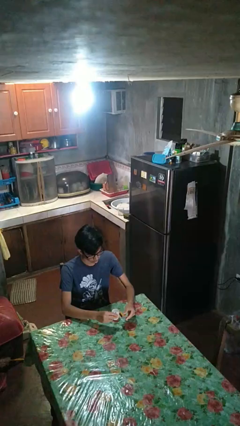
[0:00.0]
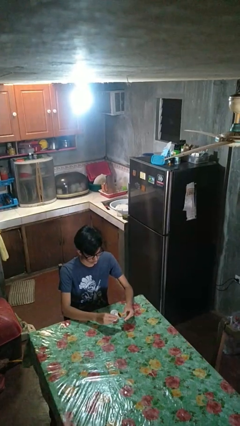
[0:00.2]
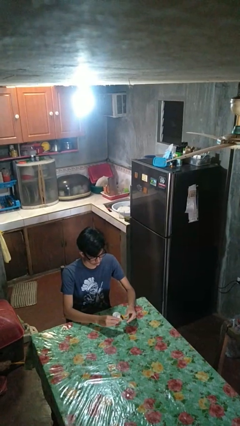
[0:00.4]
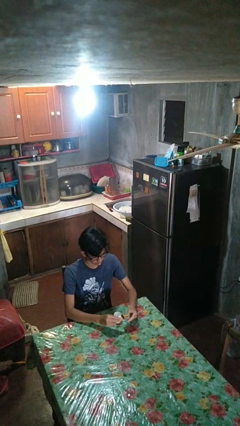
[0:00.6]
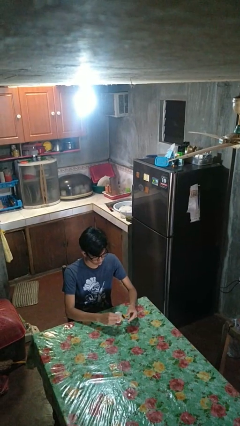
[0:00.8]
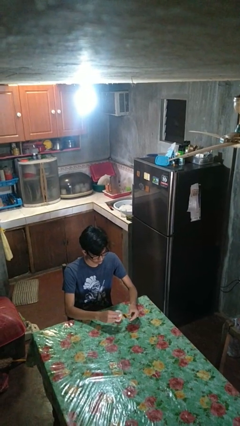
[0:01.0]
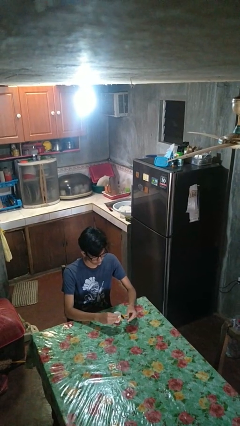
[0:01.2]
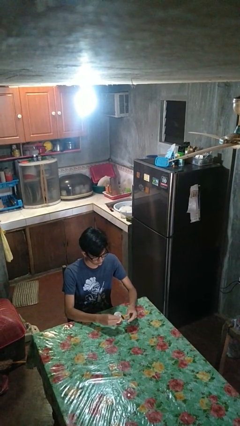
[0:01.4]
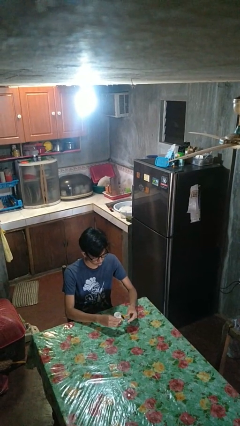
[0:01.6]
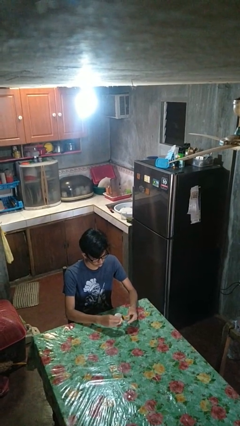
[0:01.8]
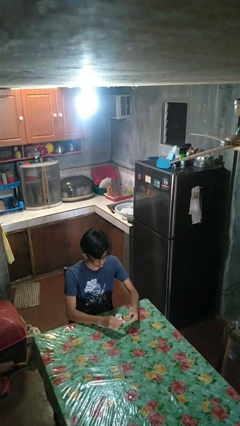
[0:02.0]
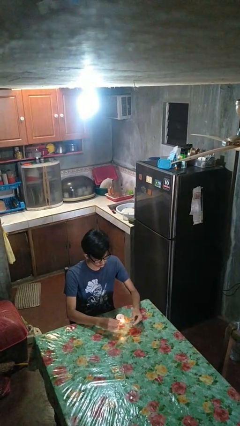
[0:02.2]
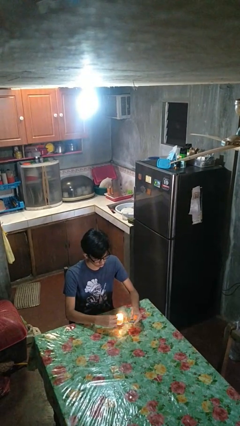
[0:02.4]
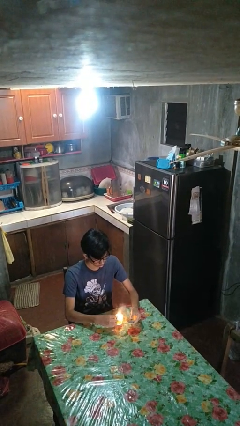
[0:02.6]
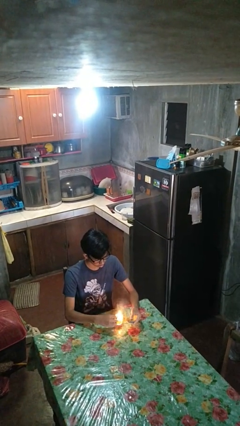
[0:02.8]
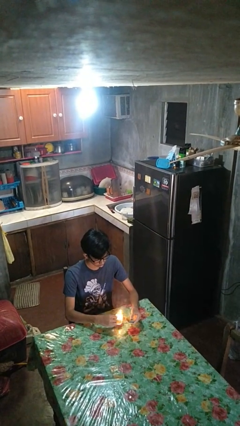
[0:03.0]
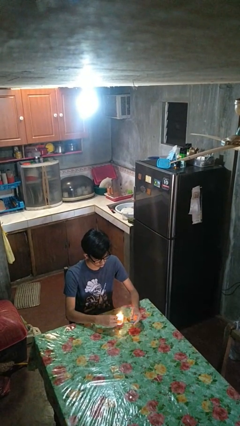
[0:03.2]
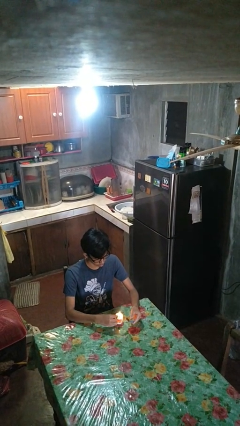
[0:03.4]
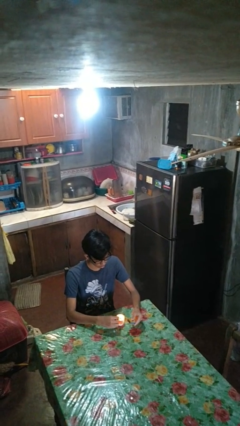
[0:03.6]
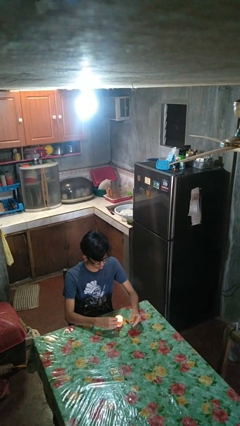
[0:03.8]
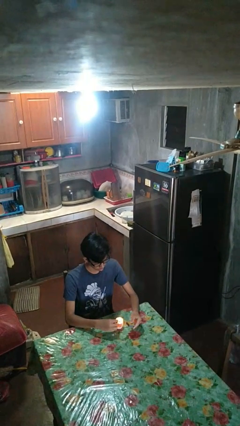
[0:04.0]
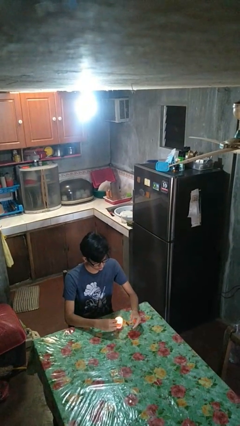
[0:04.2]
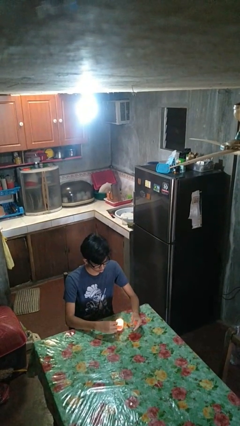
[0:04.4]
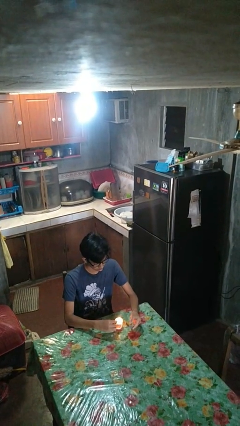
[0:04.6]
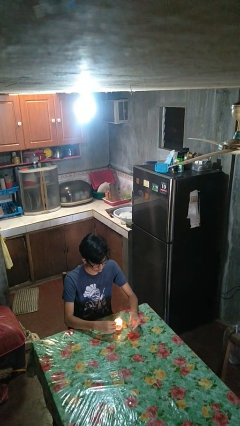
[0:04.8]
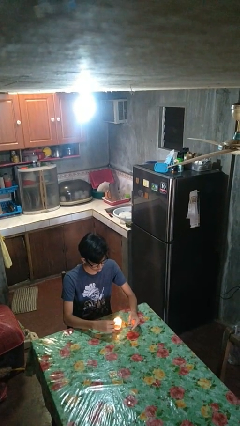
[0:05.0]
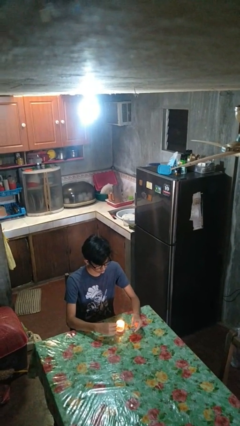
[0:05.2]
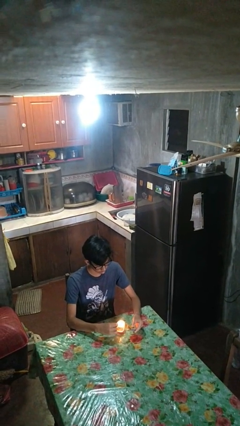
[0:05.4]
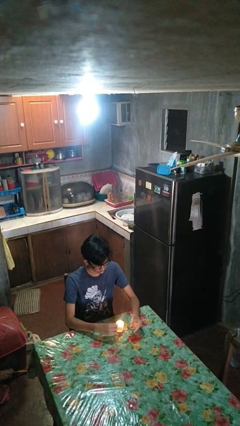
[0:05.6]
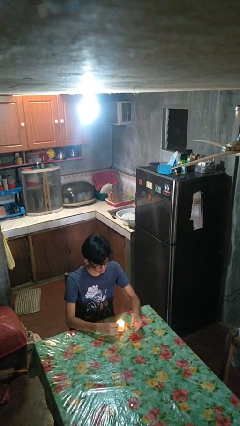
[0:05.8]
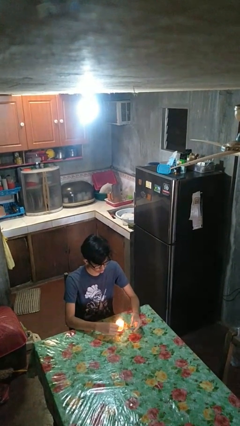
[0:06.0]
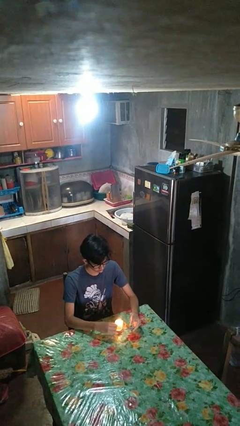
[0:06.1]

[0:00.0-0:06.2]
person lights candle

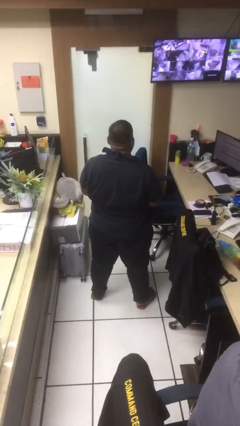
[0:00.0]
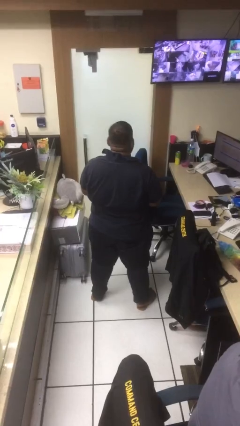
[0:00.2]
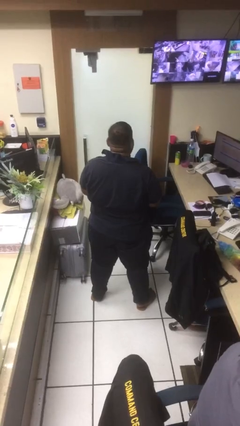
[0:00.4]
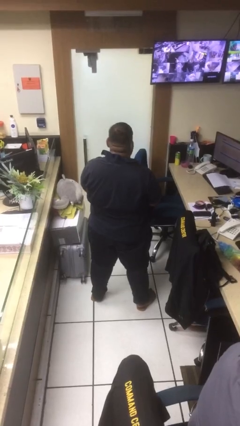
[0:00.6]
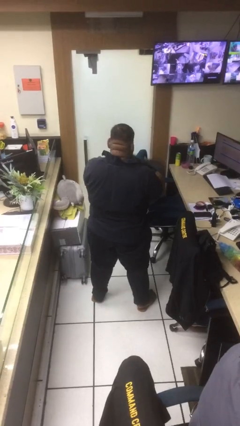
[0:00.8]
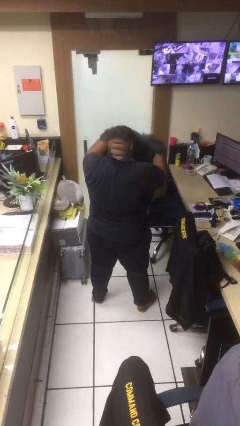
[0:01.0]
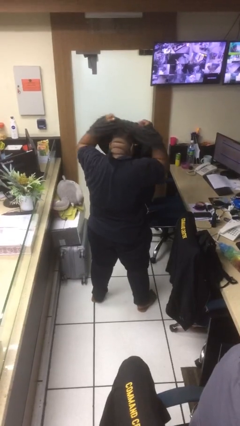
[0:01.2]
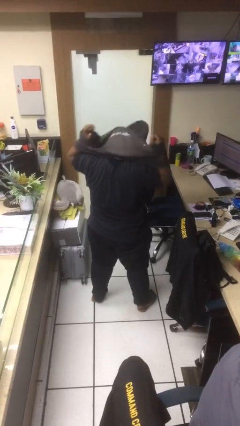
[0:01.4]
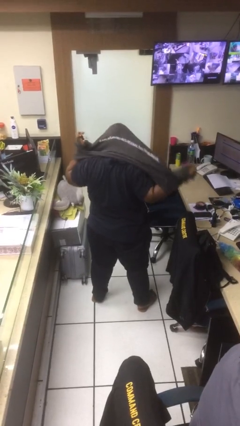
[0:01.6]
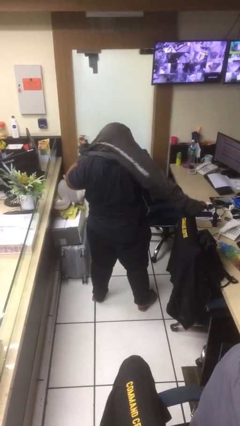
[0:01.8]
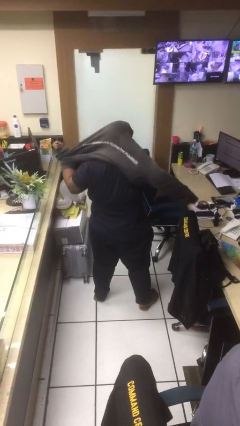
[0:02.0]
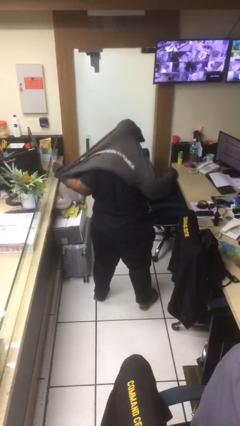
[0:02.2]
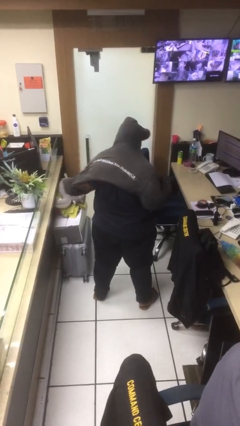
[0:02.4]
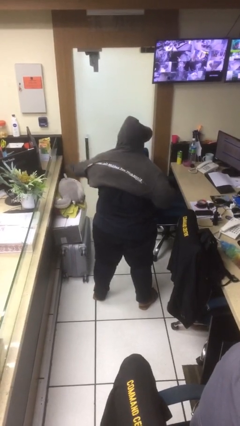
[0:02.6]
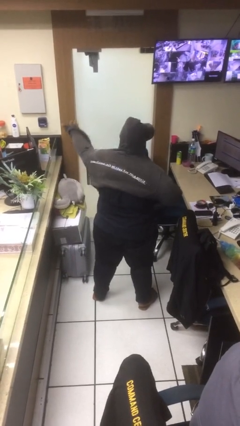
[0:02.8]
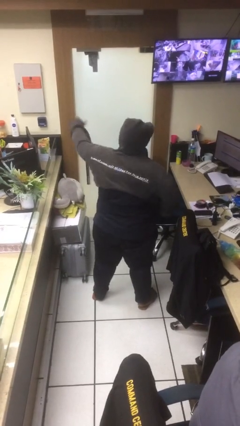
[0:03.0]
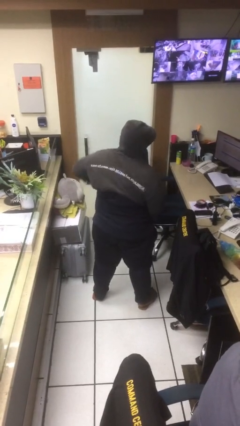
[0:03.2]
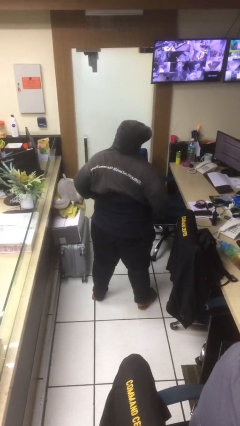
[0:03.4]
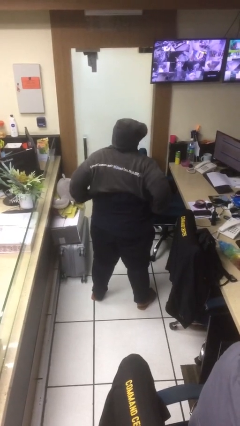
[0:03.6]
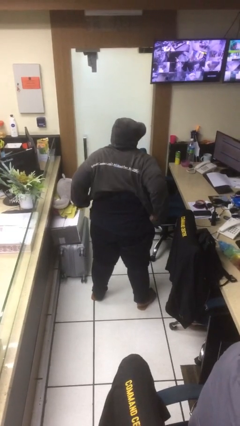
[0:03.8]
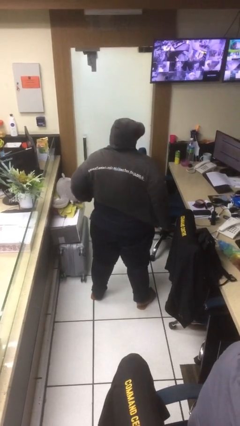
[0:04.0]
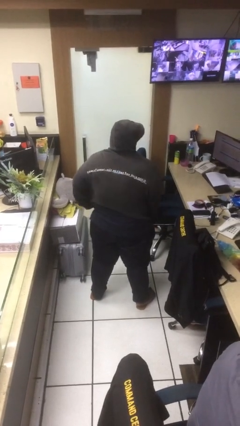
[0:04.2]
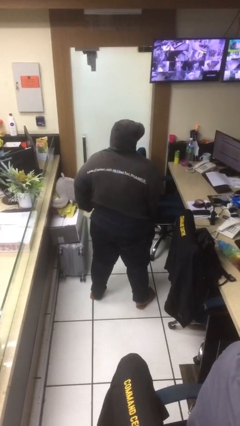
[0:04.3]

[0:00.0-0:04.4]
person puts on hoodie

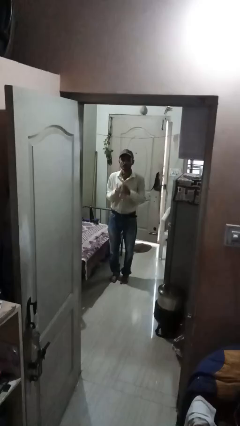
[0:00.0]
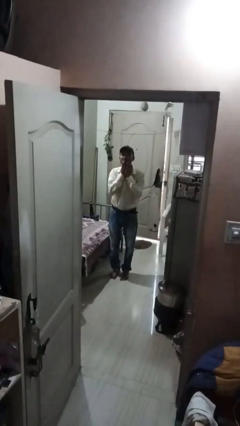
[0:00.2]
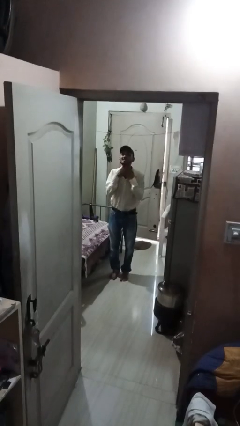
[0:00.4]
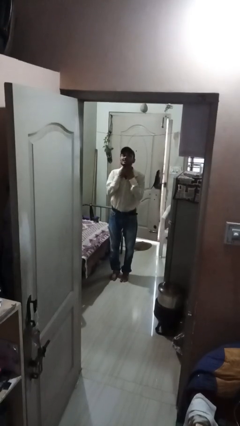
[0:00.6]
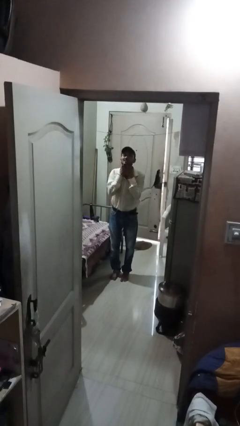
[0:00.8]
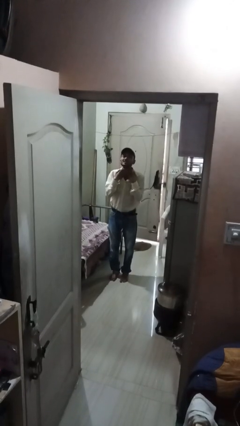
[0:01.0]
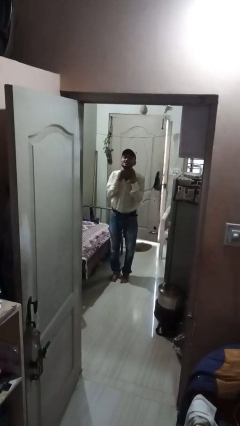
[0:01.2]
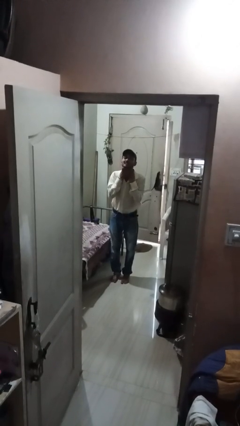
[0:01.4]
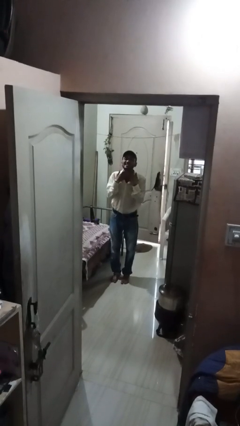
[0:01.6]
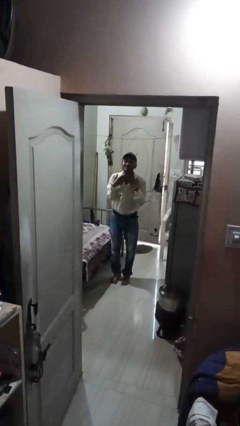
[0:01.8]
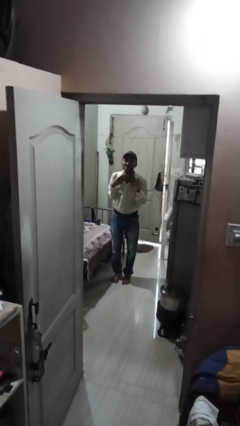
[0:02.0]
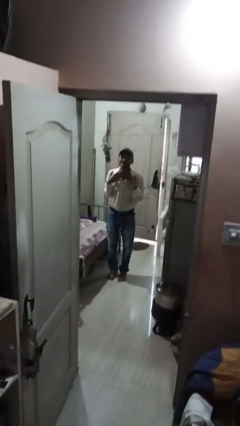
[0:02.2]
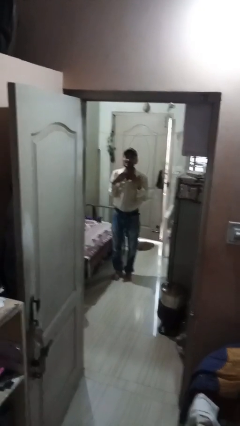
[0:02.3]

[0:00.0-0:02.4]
person rubs neck

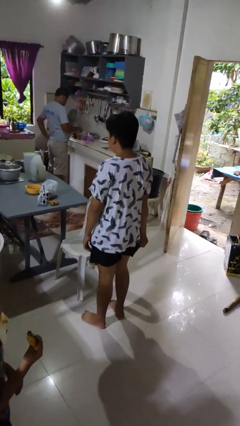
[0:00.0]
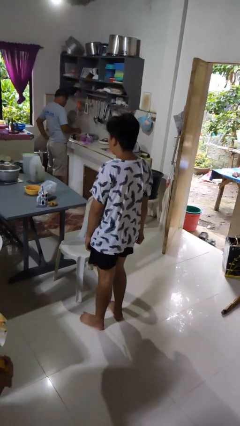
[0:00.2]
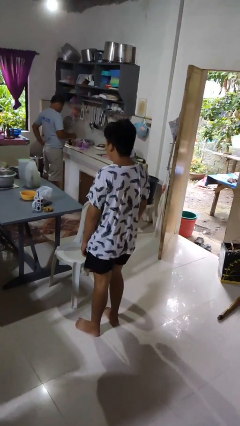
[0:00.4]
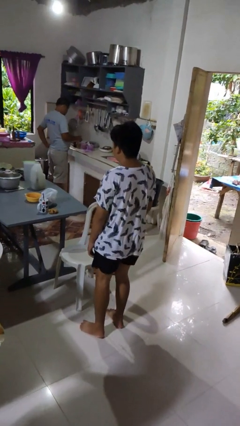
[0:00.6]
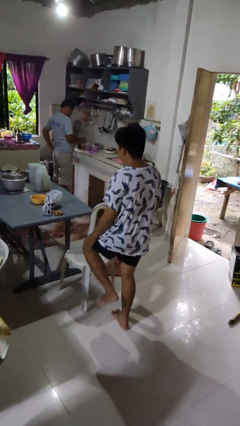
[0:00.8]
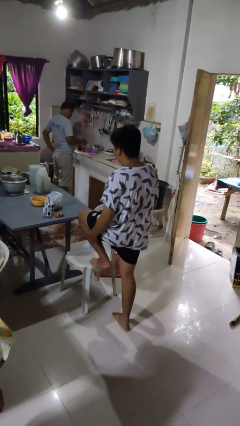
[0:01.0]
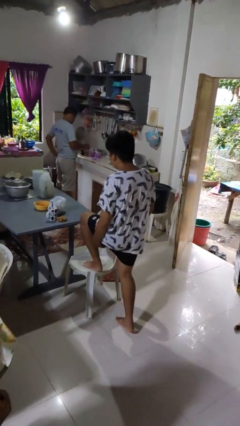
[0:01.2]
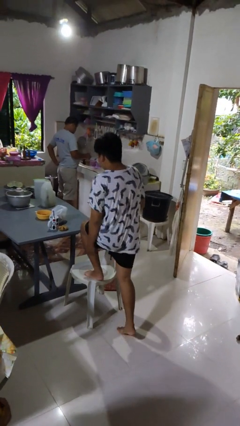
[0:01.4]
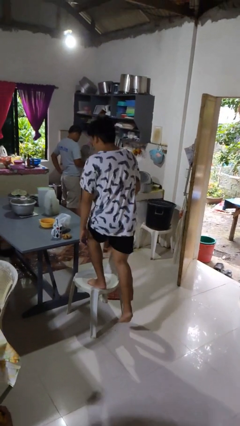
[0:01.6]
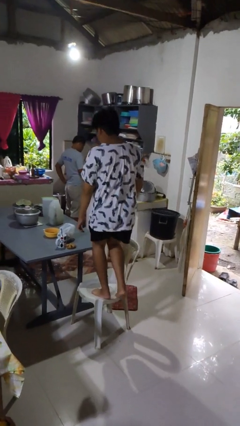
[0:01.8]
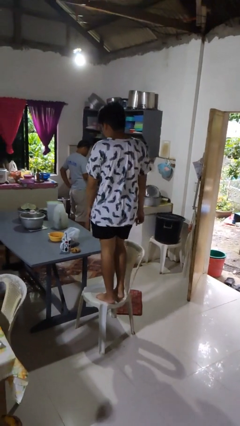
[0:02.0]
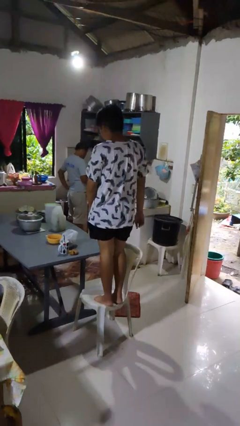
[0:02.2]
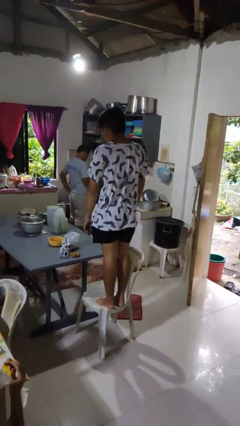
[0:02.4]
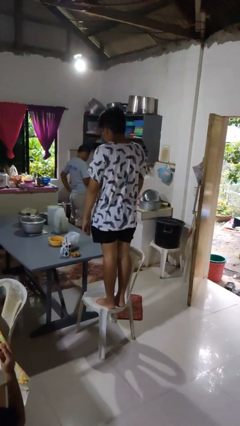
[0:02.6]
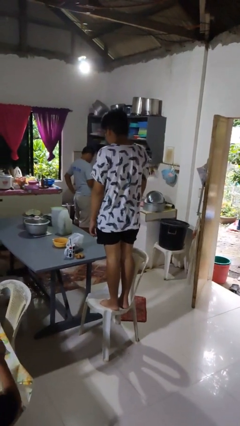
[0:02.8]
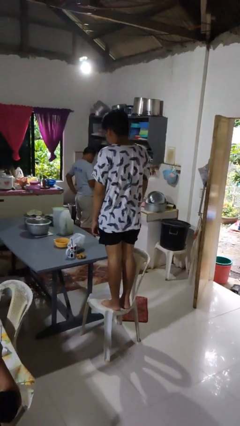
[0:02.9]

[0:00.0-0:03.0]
person climbs on chair

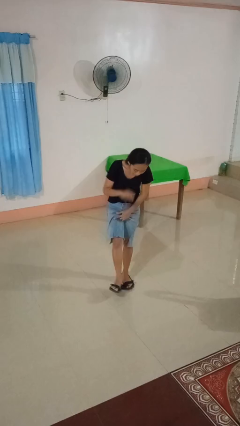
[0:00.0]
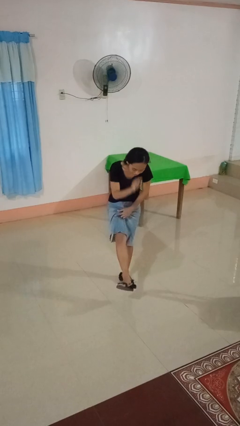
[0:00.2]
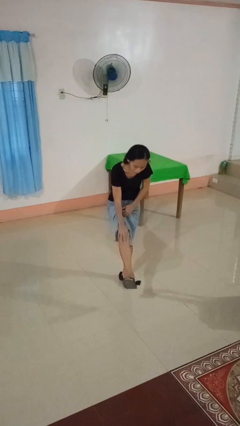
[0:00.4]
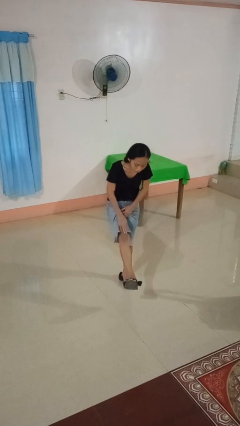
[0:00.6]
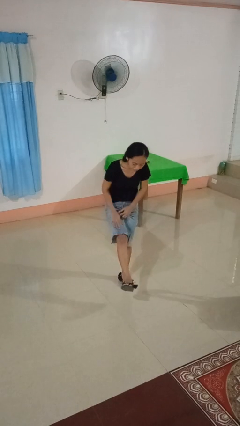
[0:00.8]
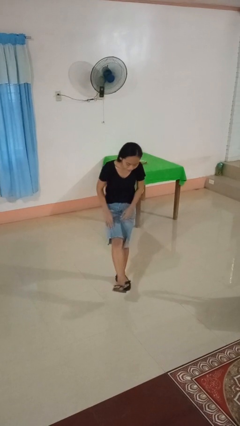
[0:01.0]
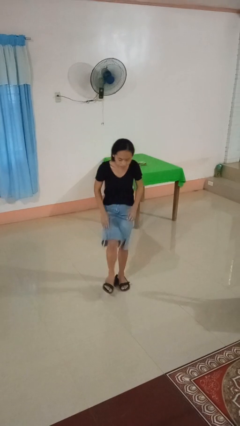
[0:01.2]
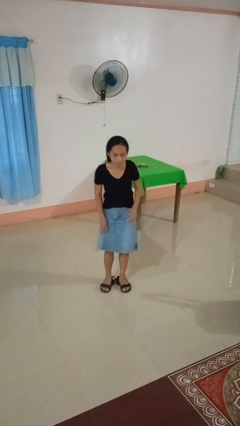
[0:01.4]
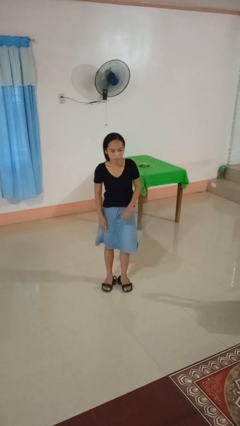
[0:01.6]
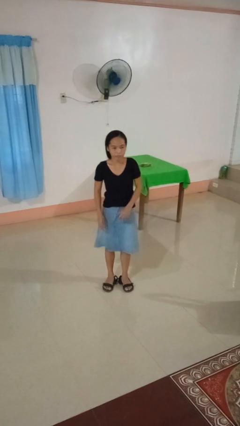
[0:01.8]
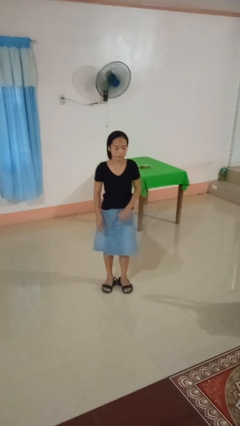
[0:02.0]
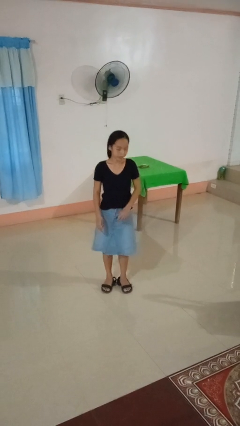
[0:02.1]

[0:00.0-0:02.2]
person swats bug
